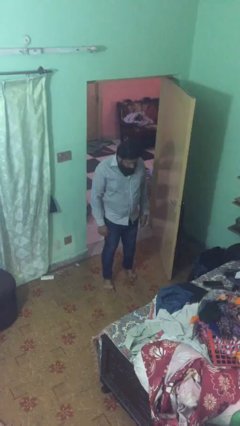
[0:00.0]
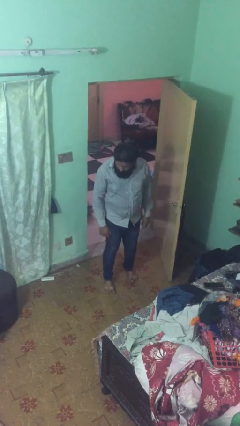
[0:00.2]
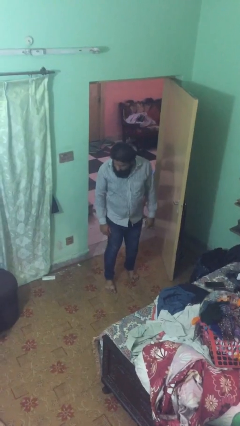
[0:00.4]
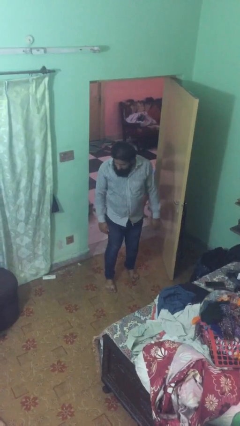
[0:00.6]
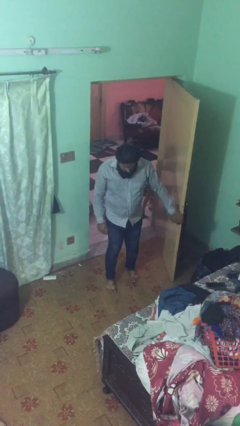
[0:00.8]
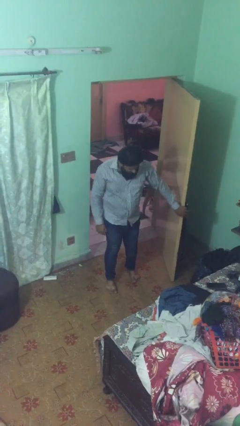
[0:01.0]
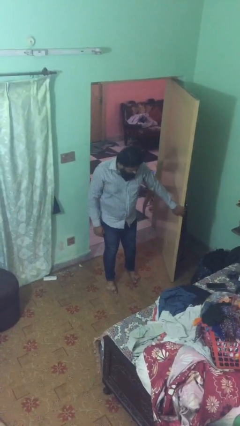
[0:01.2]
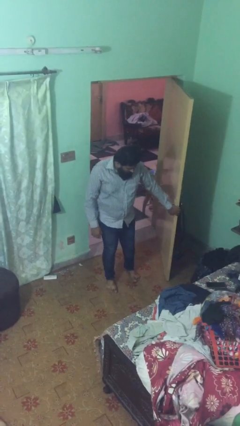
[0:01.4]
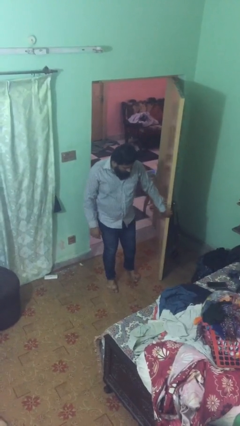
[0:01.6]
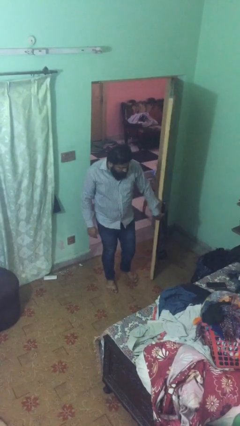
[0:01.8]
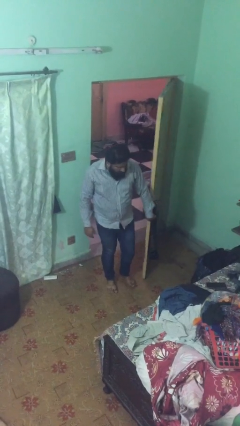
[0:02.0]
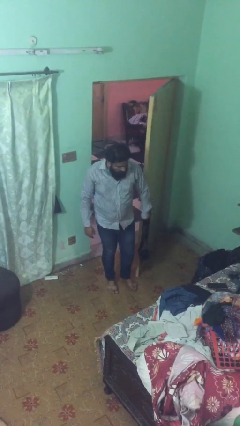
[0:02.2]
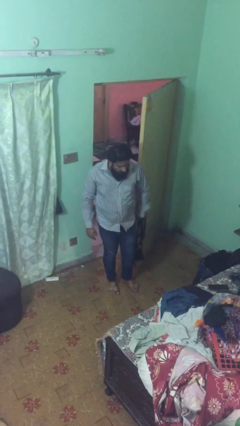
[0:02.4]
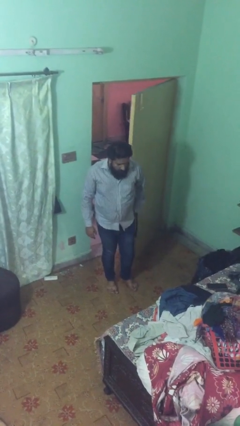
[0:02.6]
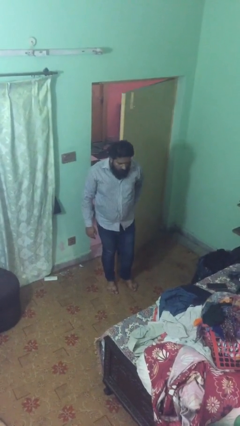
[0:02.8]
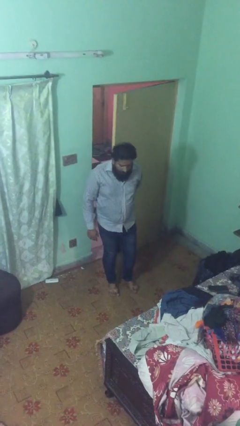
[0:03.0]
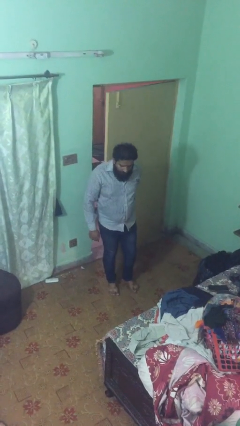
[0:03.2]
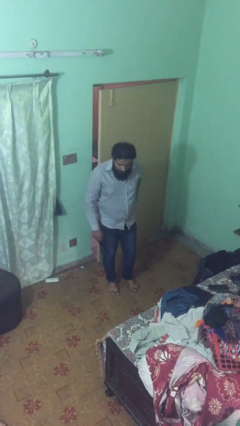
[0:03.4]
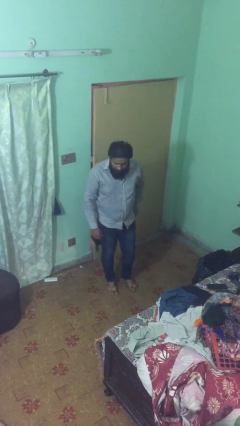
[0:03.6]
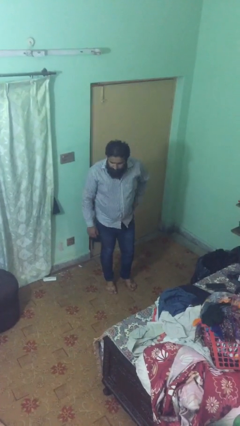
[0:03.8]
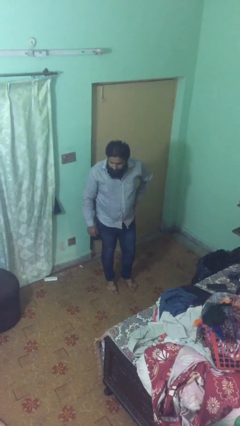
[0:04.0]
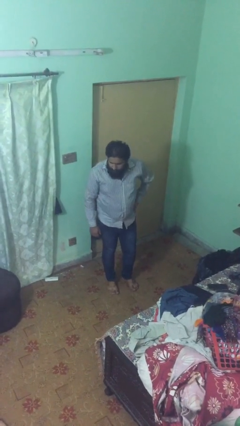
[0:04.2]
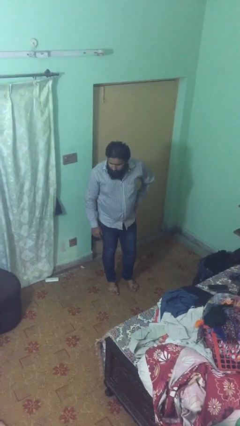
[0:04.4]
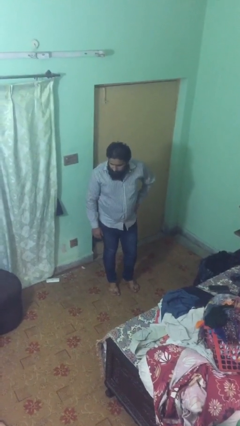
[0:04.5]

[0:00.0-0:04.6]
person closes facility door

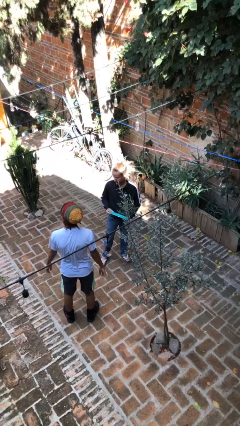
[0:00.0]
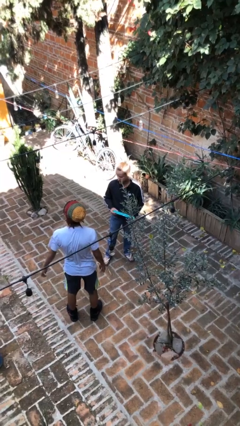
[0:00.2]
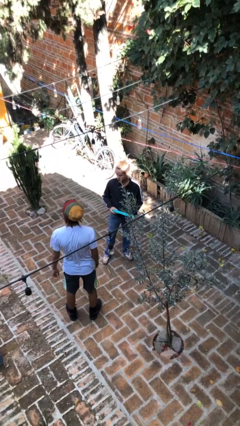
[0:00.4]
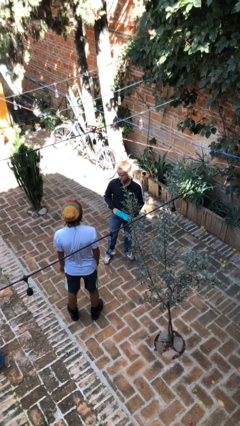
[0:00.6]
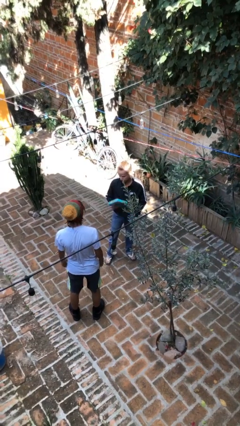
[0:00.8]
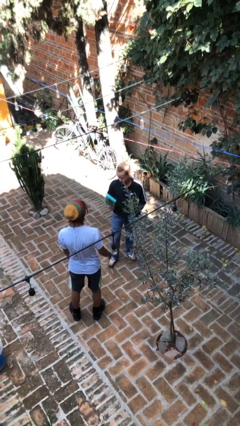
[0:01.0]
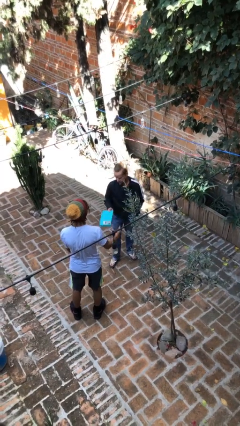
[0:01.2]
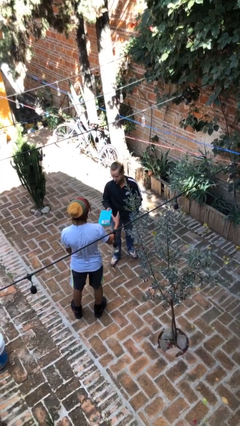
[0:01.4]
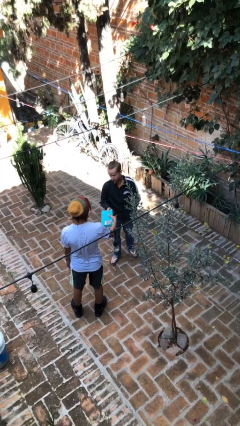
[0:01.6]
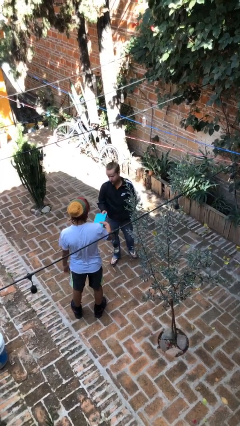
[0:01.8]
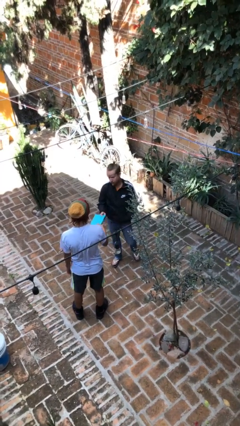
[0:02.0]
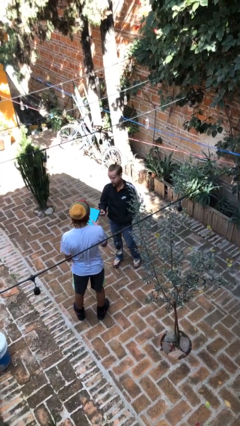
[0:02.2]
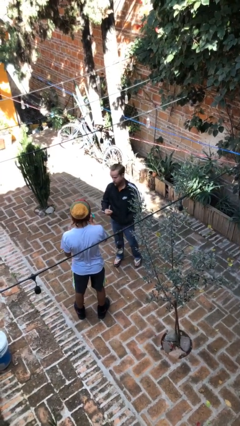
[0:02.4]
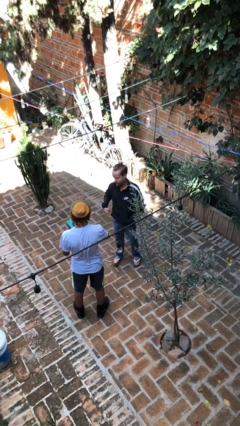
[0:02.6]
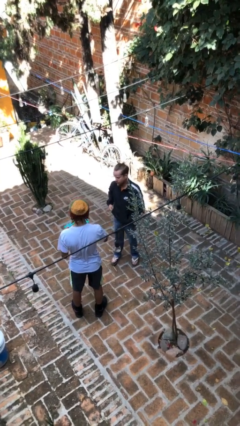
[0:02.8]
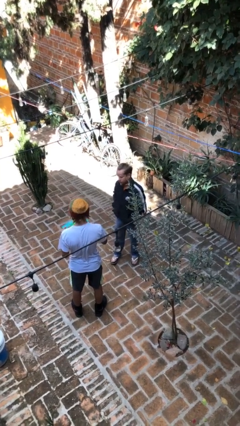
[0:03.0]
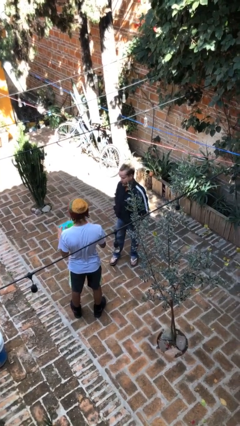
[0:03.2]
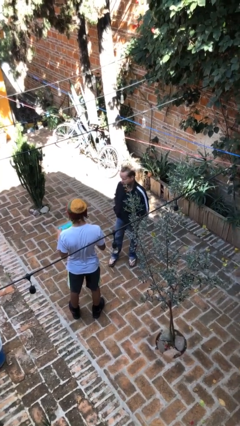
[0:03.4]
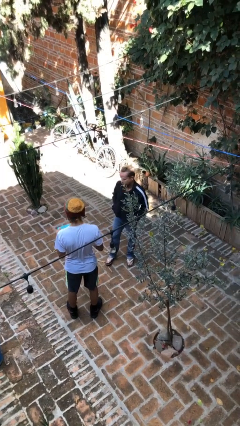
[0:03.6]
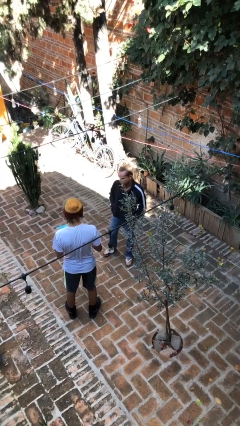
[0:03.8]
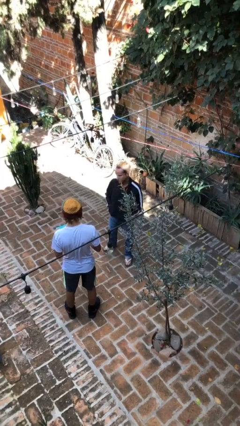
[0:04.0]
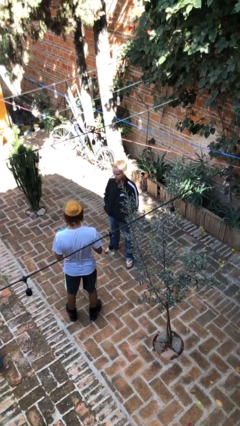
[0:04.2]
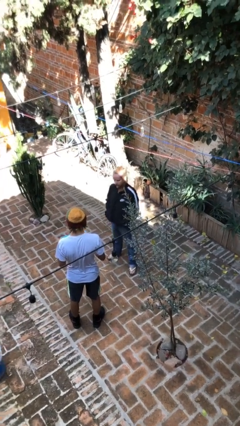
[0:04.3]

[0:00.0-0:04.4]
person transfers object to person

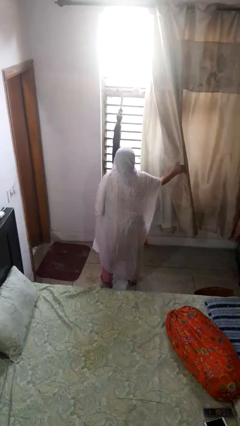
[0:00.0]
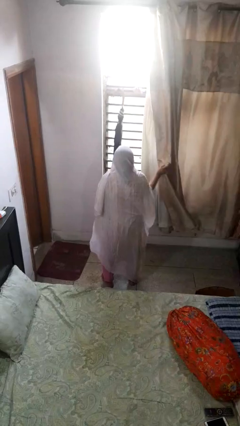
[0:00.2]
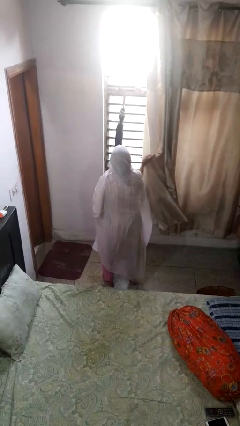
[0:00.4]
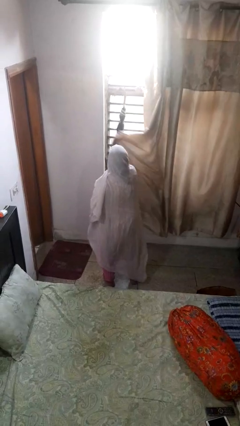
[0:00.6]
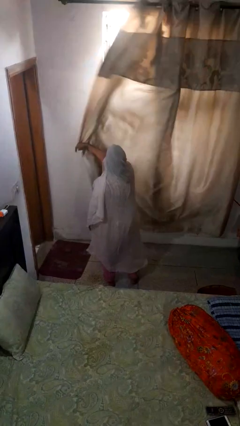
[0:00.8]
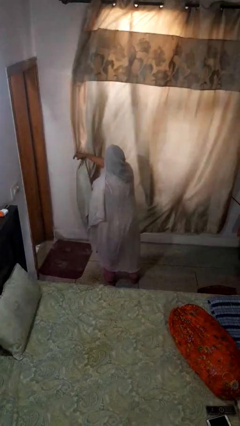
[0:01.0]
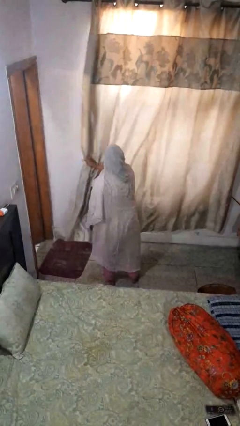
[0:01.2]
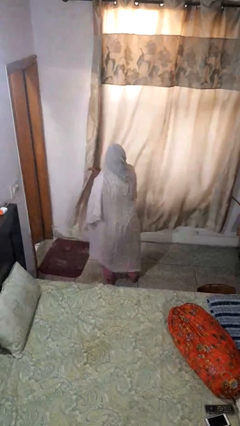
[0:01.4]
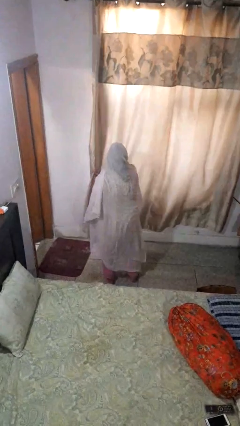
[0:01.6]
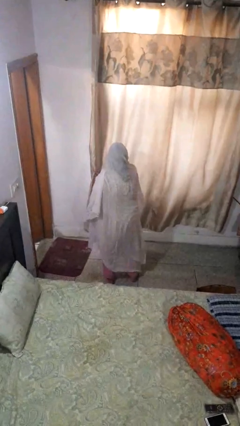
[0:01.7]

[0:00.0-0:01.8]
person closes curtains

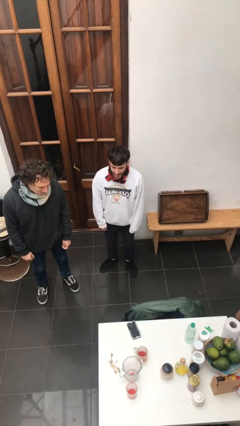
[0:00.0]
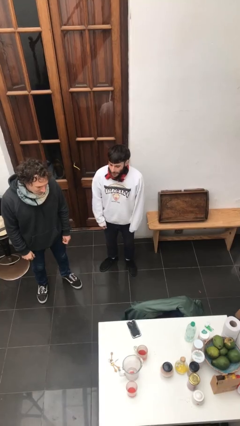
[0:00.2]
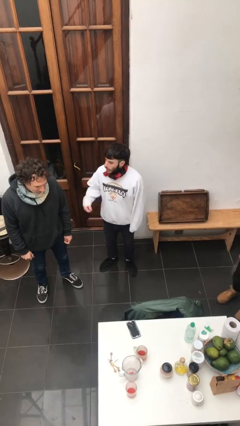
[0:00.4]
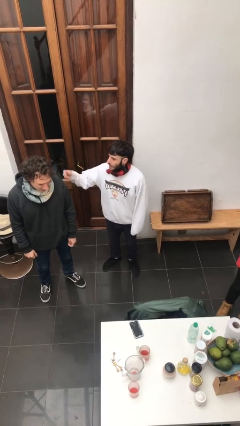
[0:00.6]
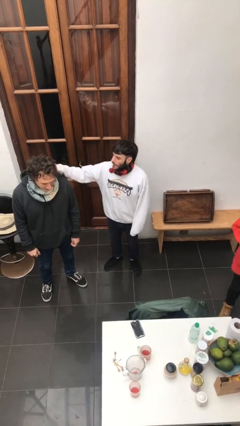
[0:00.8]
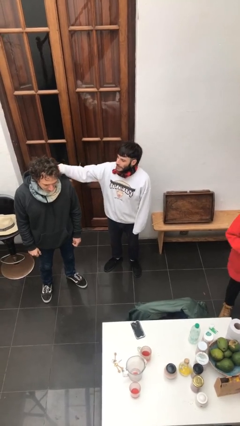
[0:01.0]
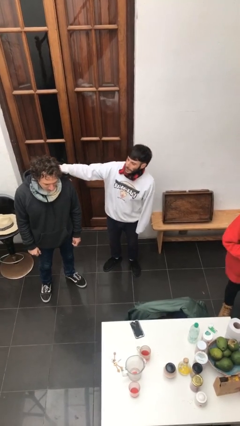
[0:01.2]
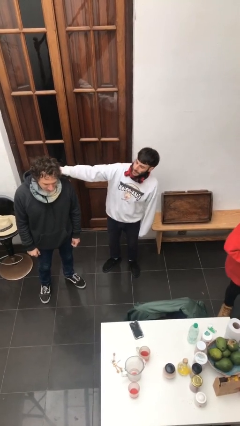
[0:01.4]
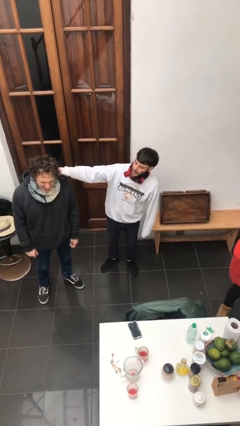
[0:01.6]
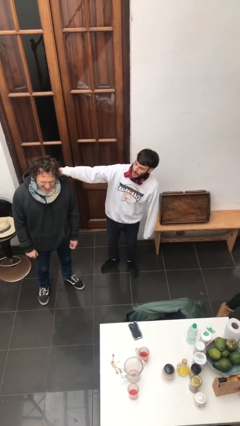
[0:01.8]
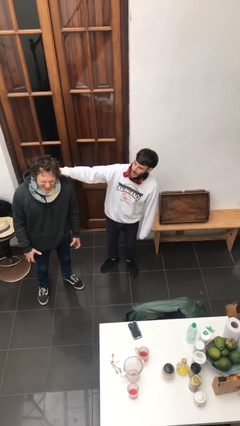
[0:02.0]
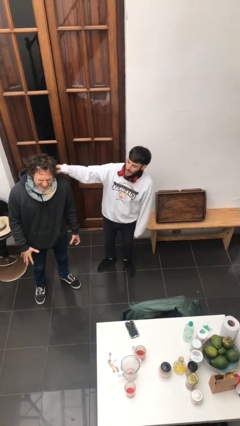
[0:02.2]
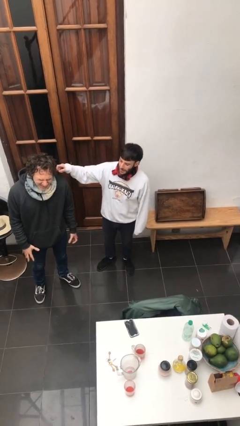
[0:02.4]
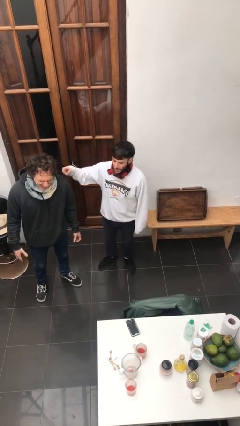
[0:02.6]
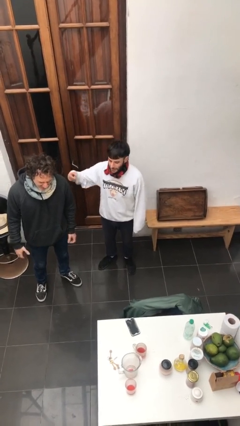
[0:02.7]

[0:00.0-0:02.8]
person grabs person by hair

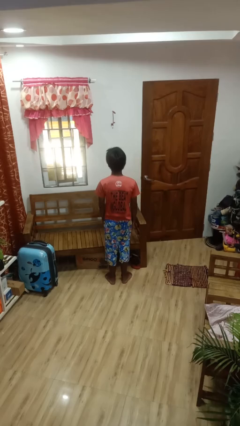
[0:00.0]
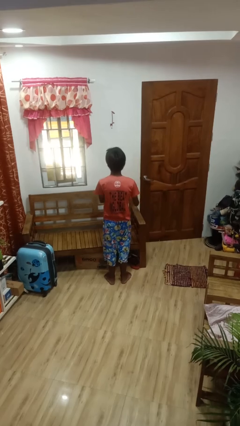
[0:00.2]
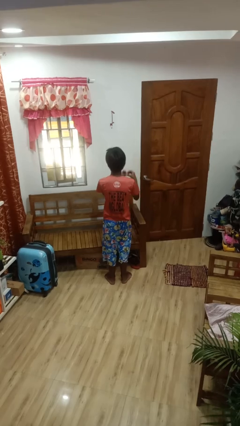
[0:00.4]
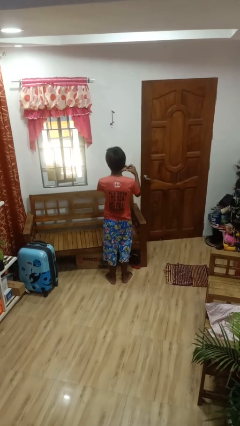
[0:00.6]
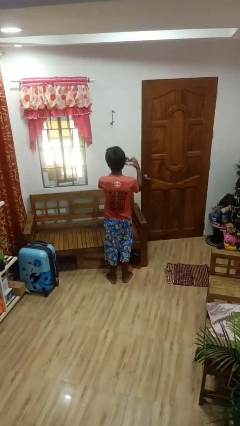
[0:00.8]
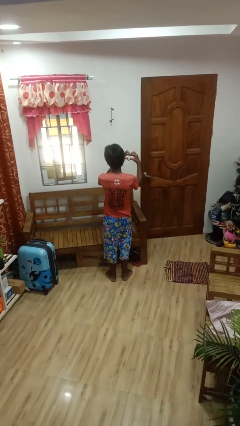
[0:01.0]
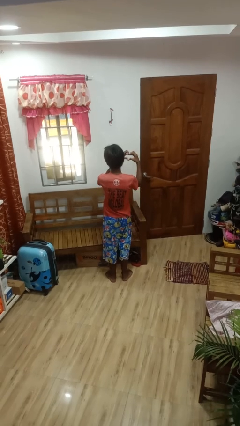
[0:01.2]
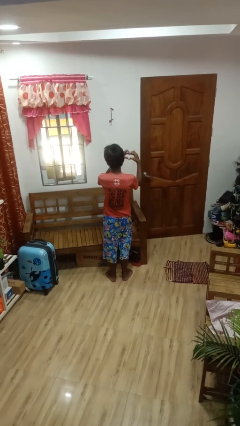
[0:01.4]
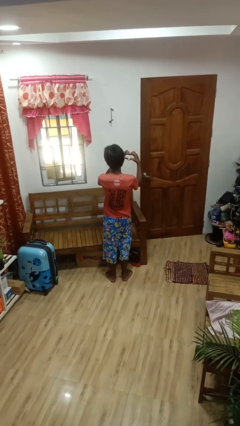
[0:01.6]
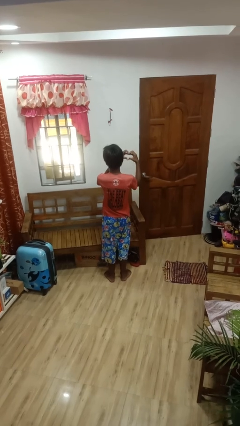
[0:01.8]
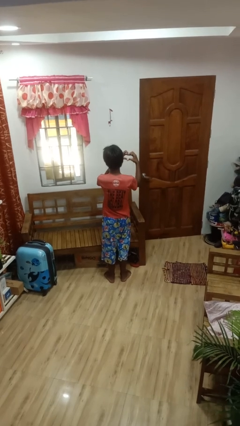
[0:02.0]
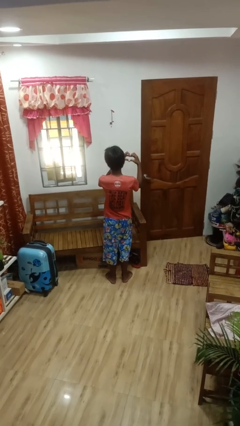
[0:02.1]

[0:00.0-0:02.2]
person gestures heart

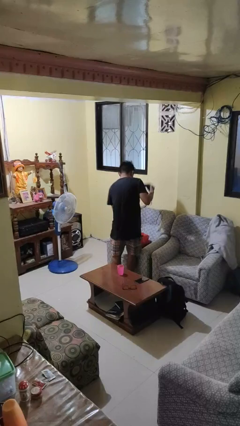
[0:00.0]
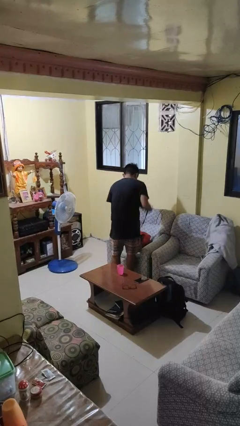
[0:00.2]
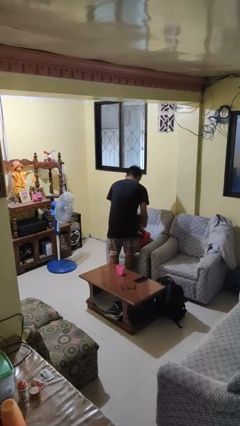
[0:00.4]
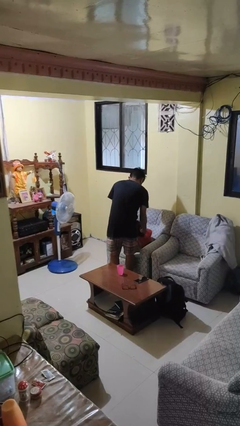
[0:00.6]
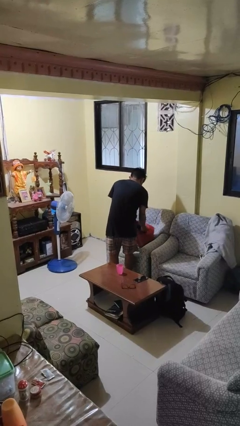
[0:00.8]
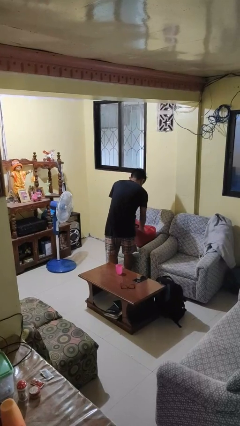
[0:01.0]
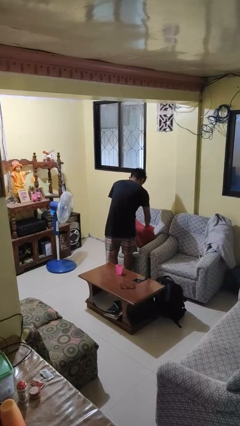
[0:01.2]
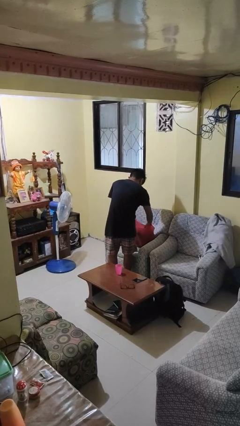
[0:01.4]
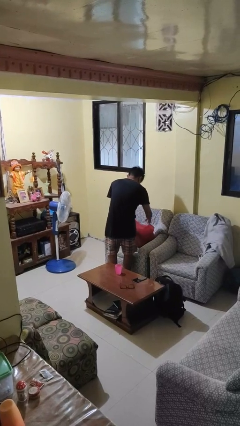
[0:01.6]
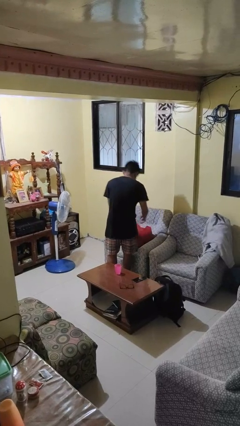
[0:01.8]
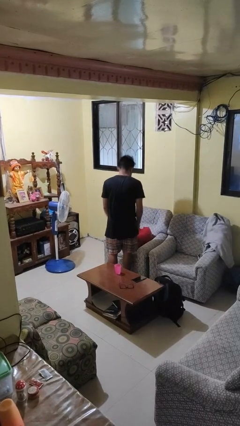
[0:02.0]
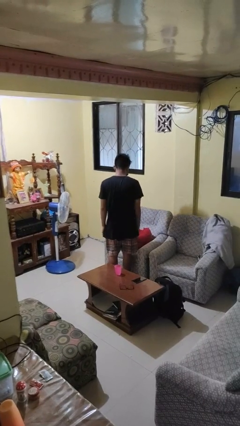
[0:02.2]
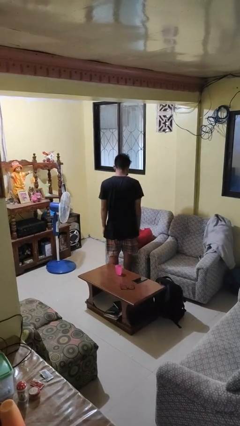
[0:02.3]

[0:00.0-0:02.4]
person puts object into bag
